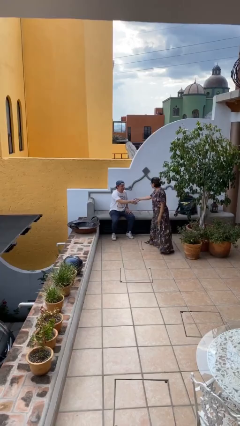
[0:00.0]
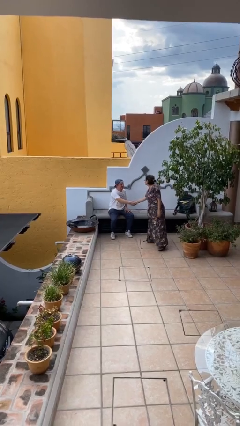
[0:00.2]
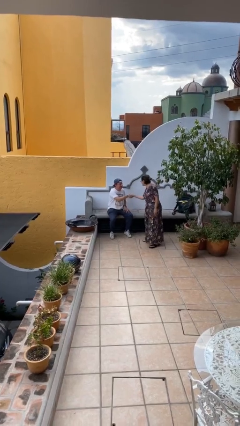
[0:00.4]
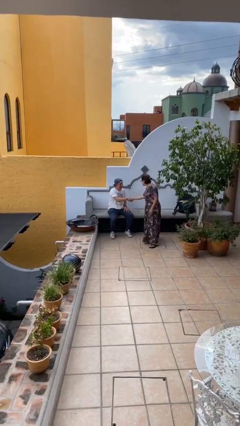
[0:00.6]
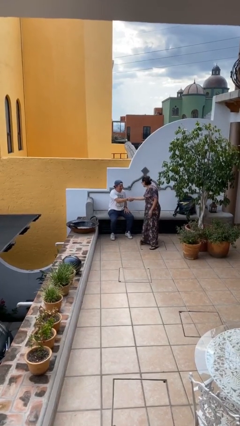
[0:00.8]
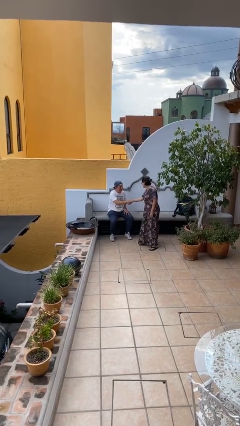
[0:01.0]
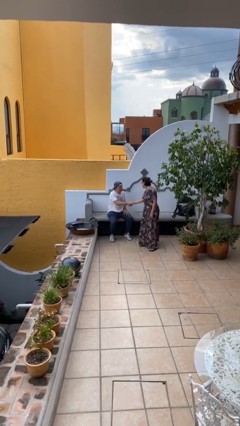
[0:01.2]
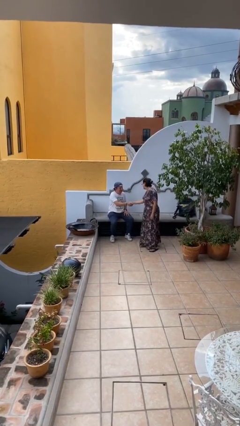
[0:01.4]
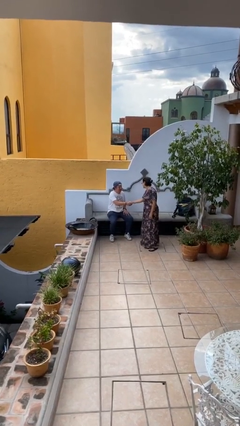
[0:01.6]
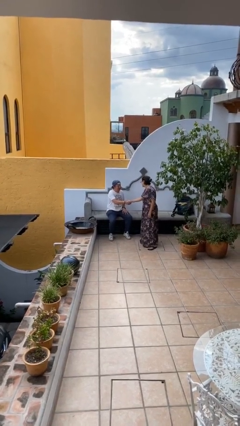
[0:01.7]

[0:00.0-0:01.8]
person shakes hand

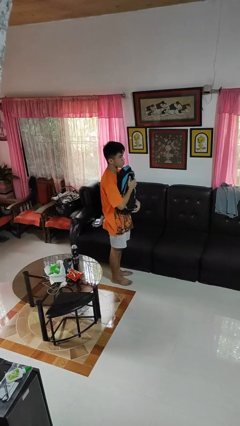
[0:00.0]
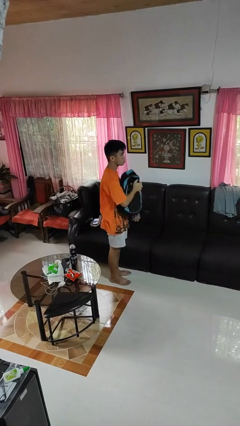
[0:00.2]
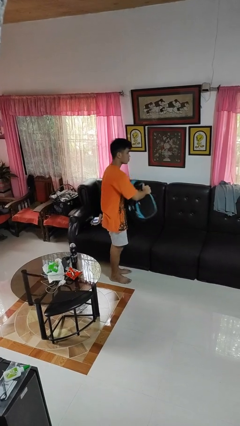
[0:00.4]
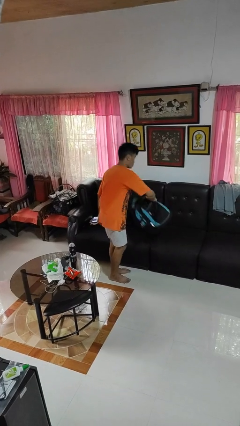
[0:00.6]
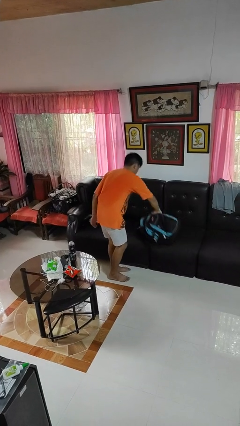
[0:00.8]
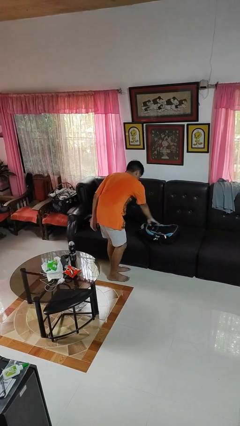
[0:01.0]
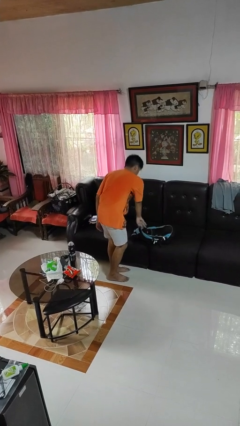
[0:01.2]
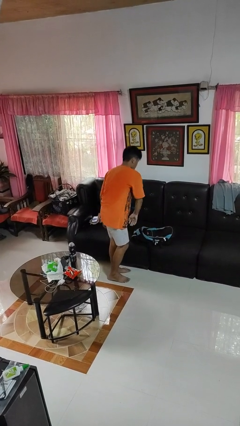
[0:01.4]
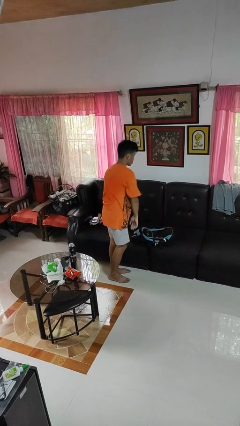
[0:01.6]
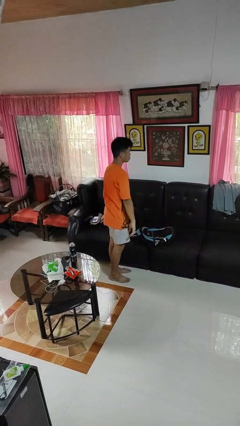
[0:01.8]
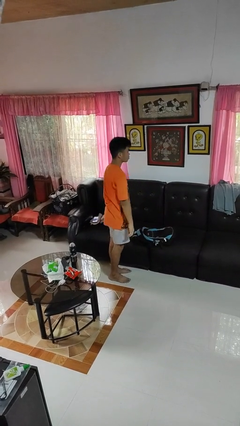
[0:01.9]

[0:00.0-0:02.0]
person puts down object on couch

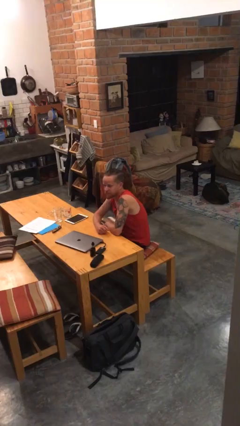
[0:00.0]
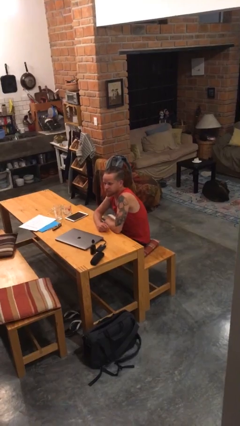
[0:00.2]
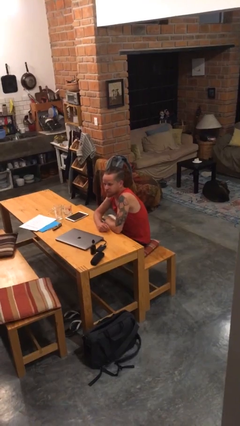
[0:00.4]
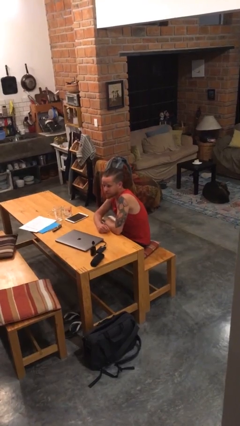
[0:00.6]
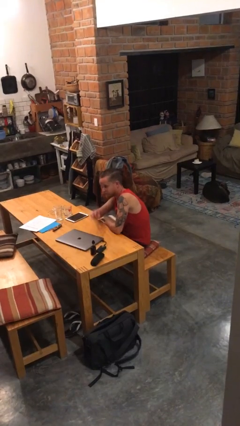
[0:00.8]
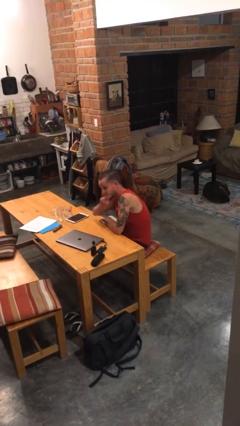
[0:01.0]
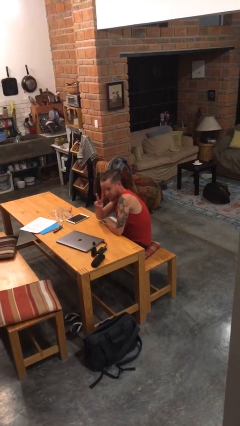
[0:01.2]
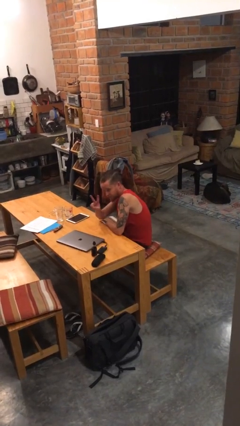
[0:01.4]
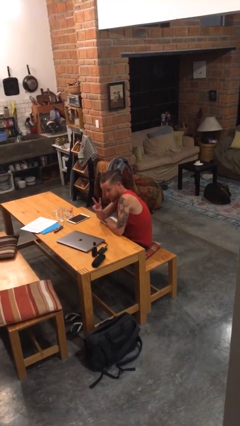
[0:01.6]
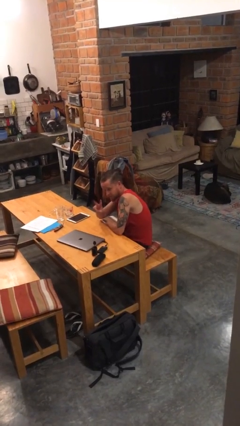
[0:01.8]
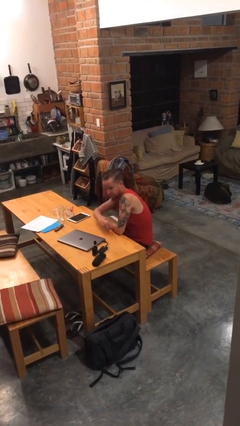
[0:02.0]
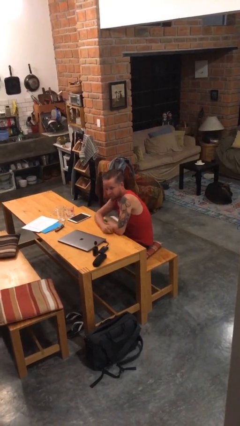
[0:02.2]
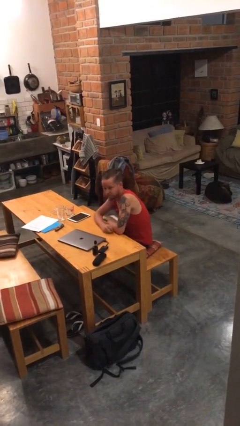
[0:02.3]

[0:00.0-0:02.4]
person gestures peace

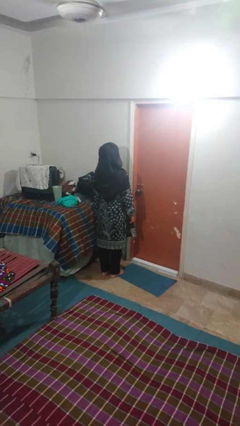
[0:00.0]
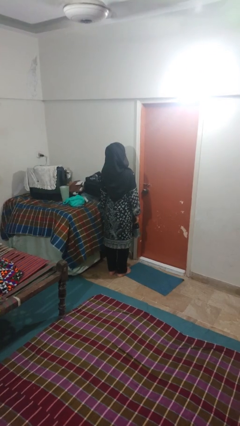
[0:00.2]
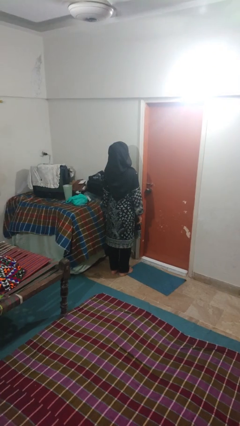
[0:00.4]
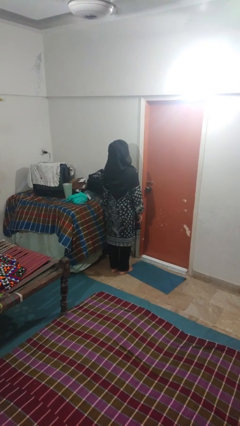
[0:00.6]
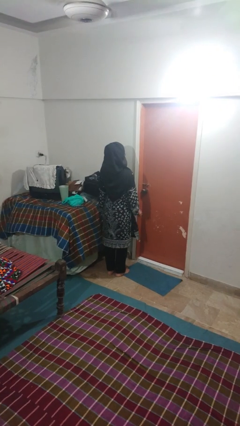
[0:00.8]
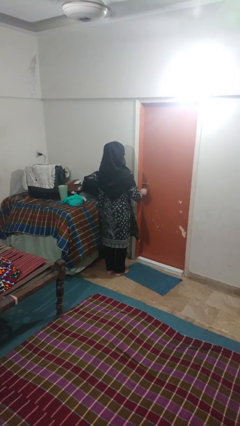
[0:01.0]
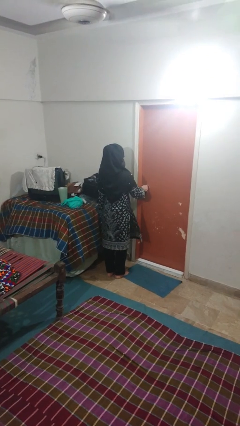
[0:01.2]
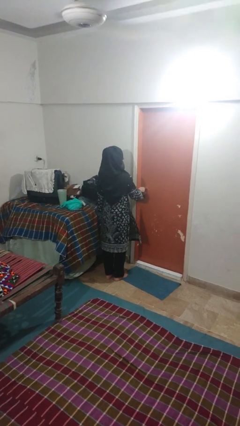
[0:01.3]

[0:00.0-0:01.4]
person locks door with keys

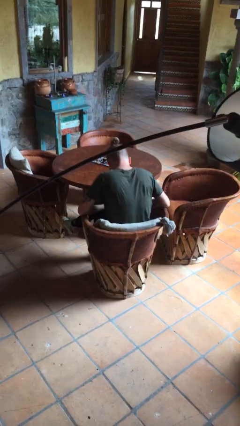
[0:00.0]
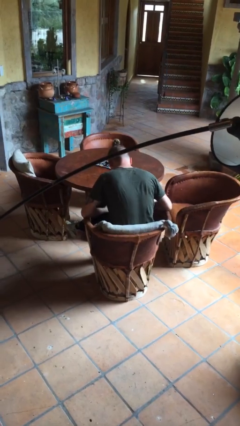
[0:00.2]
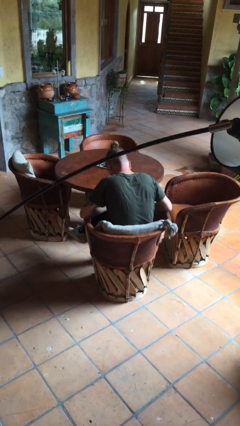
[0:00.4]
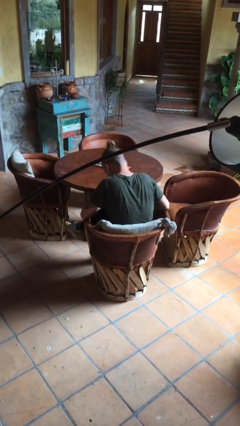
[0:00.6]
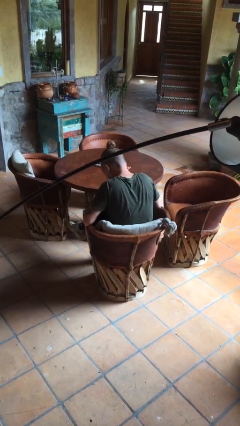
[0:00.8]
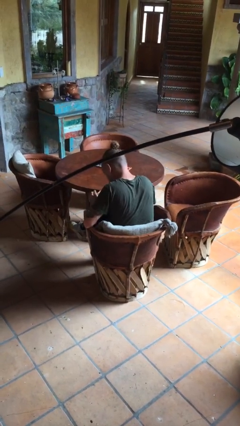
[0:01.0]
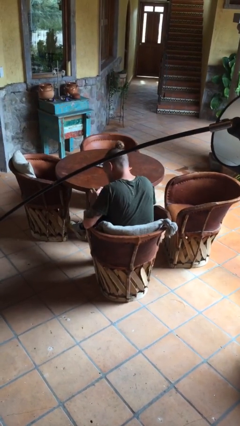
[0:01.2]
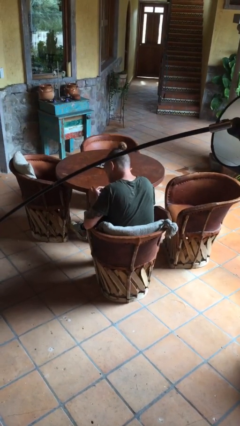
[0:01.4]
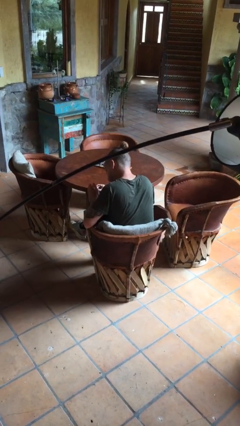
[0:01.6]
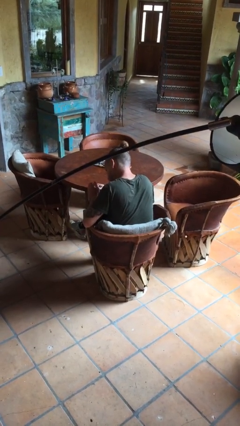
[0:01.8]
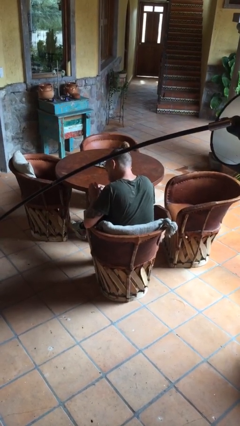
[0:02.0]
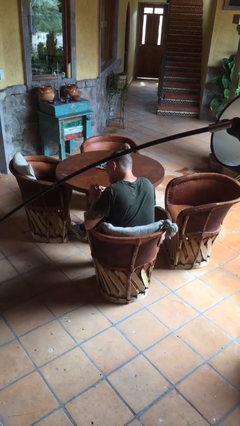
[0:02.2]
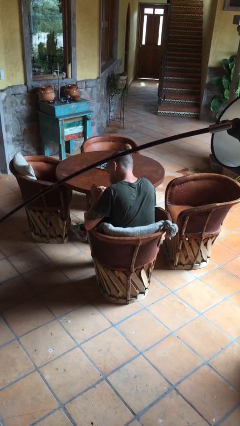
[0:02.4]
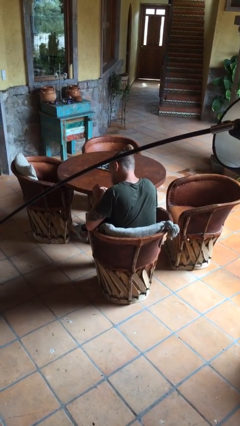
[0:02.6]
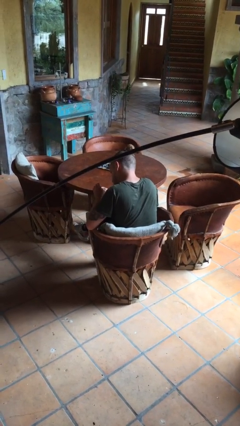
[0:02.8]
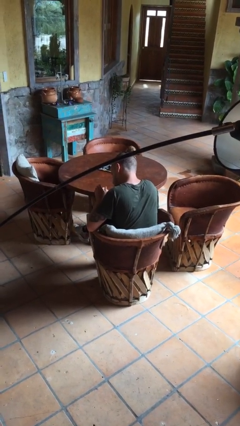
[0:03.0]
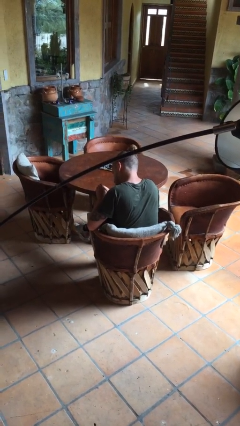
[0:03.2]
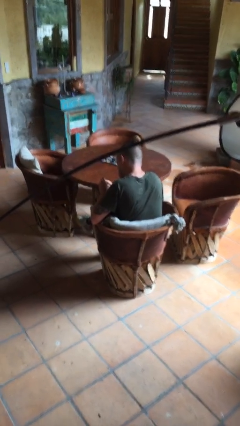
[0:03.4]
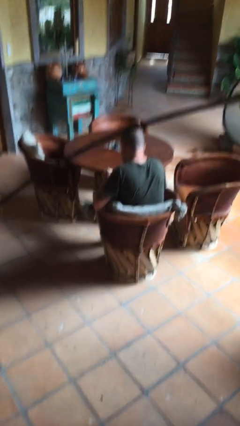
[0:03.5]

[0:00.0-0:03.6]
person clips fingernails

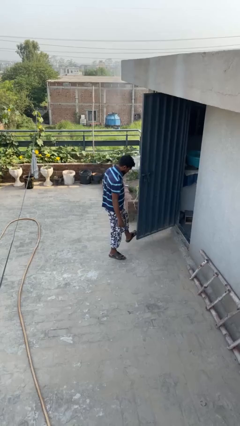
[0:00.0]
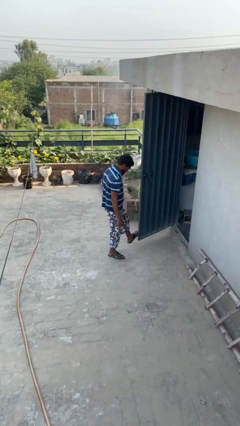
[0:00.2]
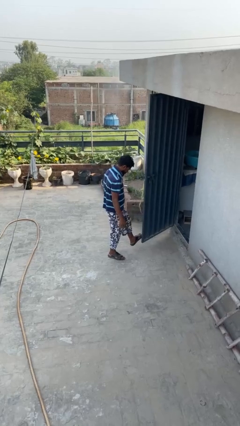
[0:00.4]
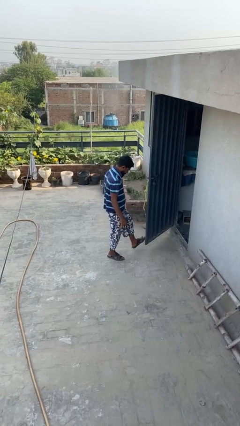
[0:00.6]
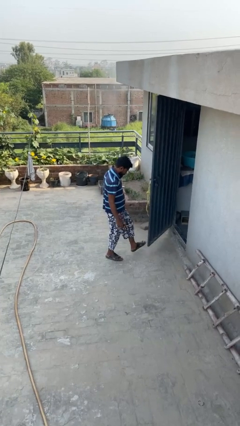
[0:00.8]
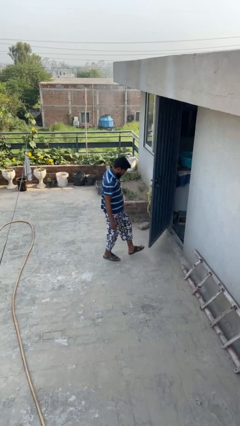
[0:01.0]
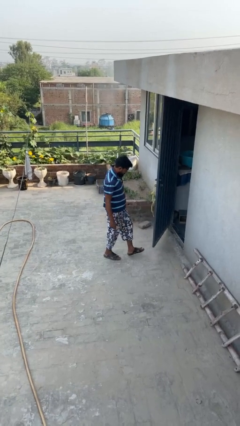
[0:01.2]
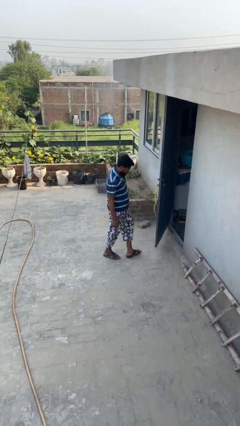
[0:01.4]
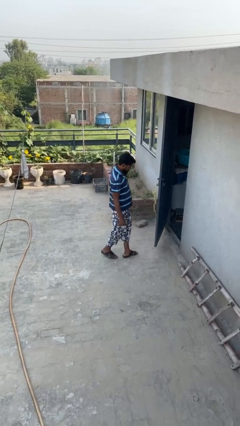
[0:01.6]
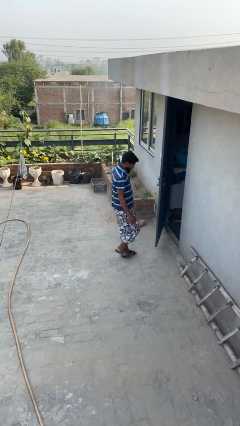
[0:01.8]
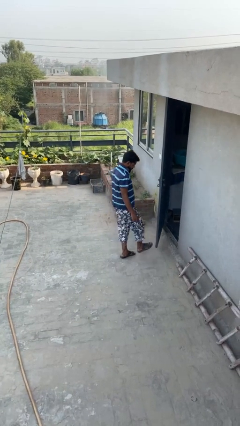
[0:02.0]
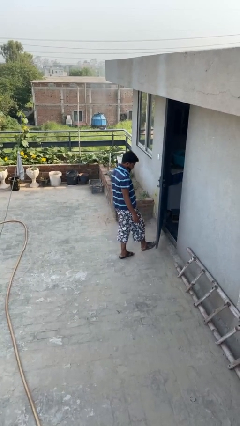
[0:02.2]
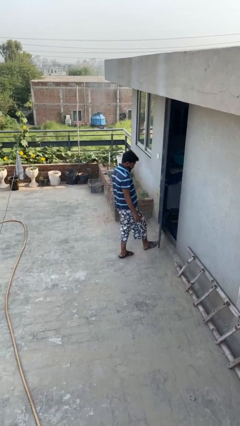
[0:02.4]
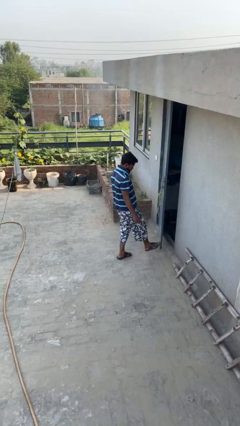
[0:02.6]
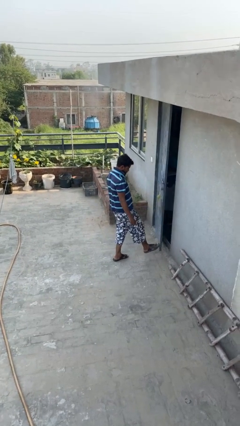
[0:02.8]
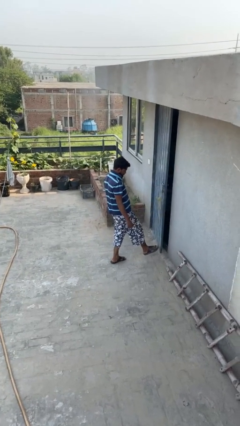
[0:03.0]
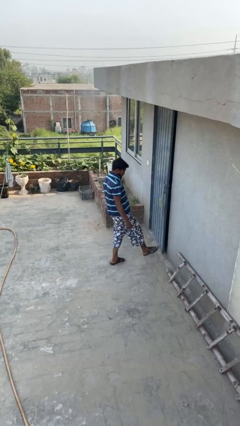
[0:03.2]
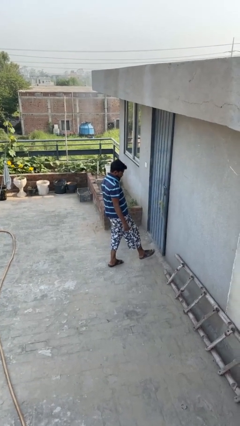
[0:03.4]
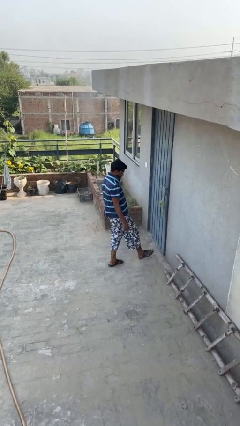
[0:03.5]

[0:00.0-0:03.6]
person closes door with foot

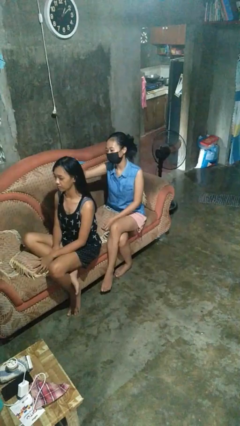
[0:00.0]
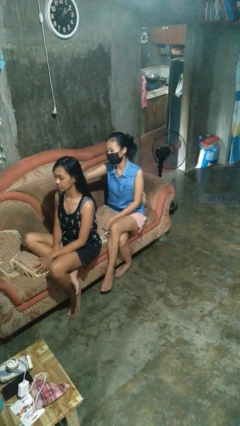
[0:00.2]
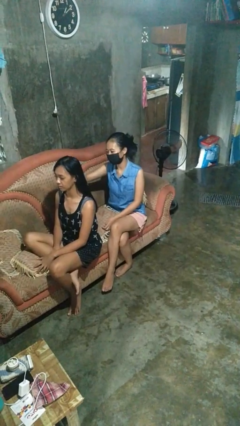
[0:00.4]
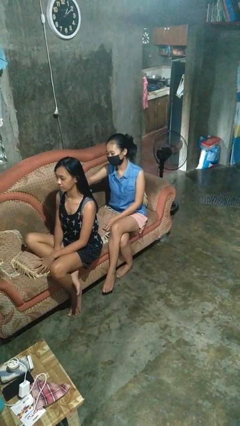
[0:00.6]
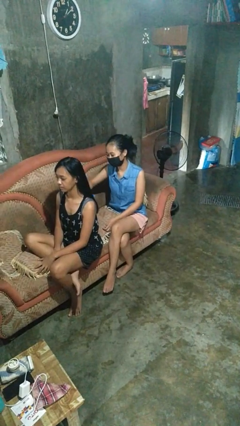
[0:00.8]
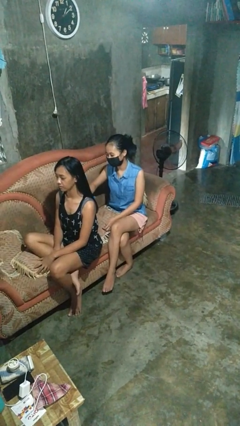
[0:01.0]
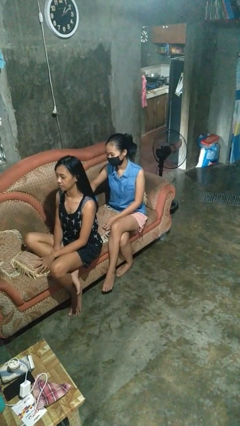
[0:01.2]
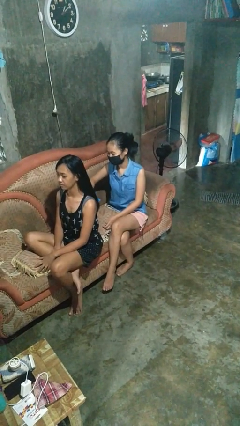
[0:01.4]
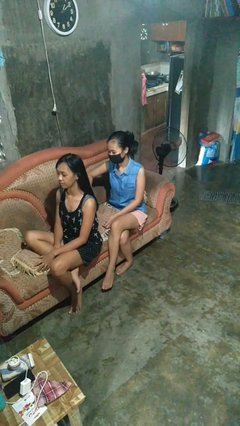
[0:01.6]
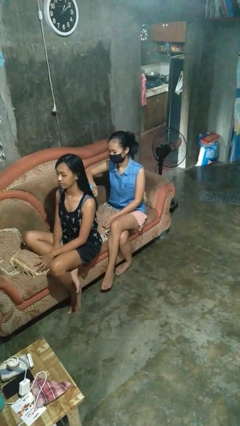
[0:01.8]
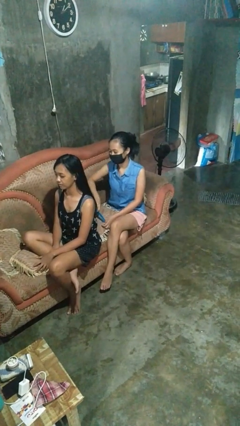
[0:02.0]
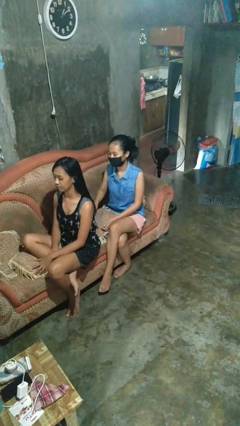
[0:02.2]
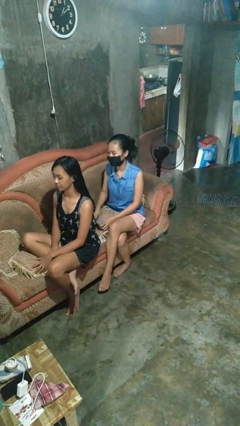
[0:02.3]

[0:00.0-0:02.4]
person brushes hair of person
